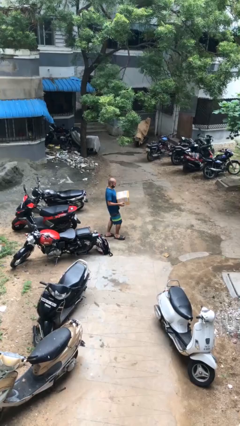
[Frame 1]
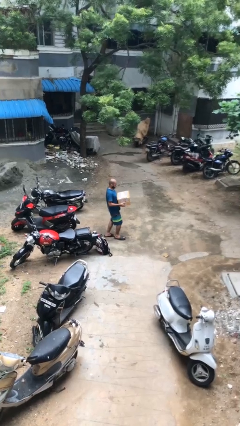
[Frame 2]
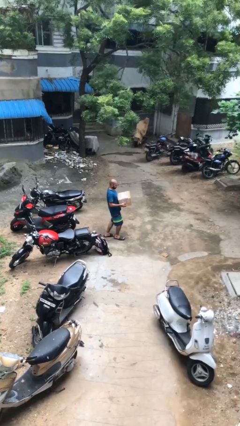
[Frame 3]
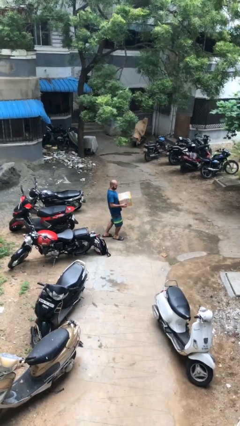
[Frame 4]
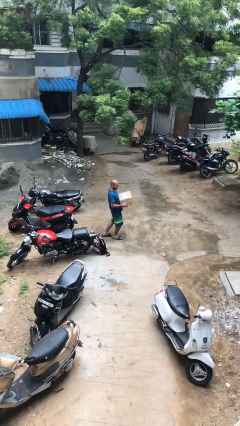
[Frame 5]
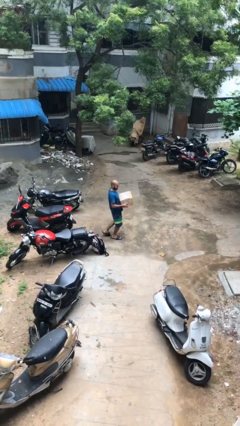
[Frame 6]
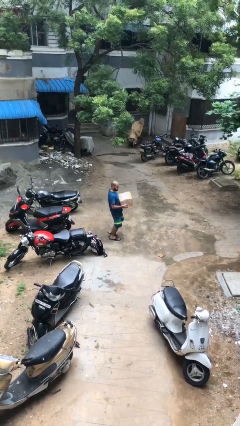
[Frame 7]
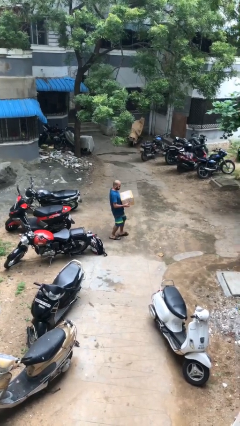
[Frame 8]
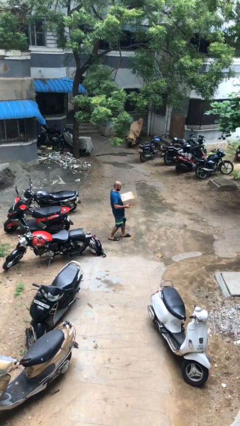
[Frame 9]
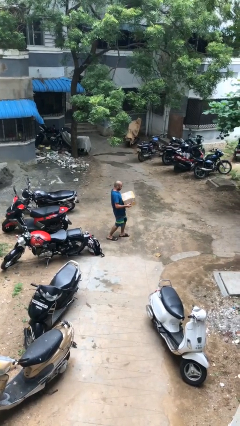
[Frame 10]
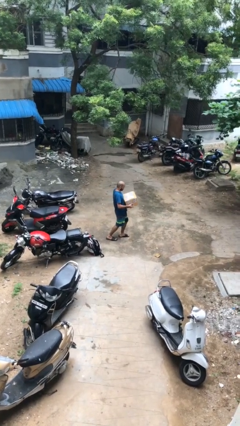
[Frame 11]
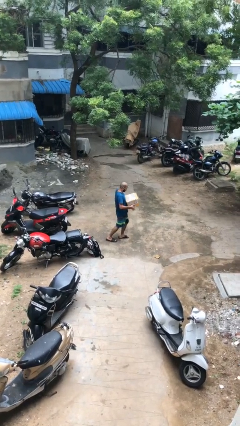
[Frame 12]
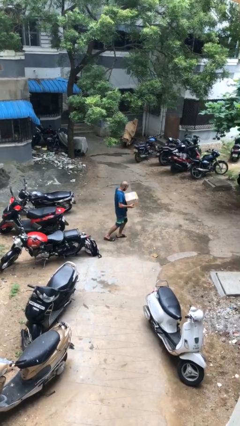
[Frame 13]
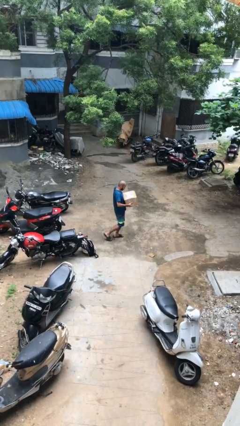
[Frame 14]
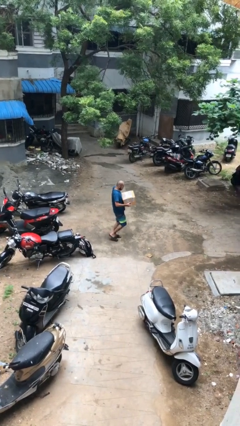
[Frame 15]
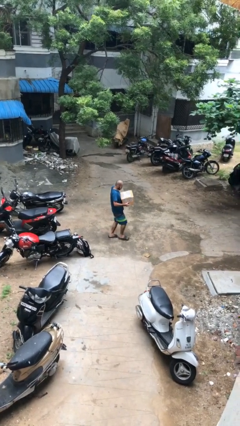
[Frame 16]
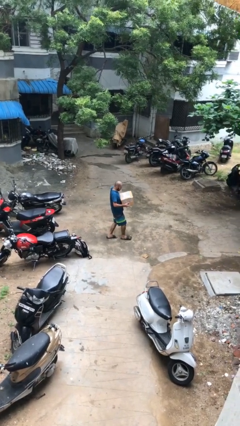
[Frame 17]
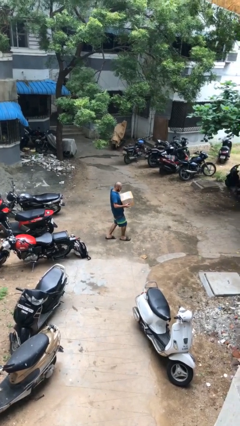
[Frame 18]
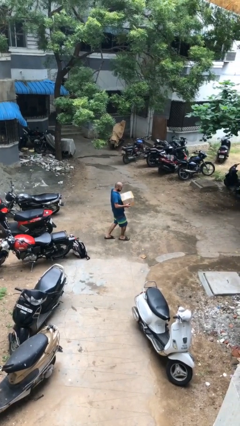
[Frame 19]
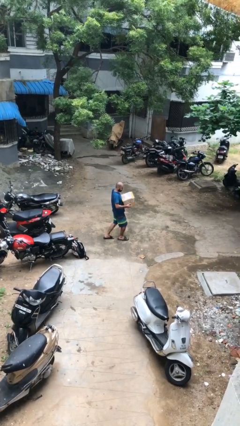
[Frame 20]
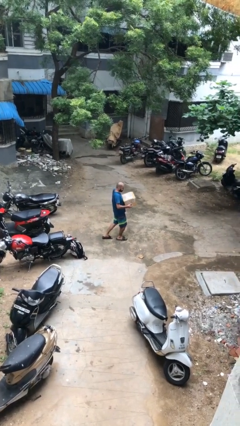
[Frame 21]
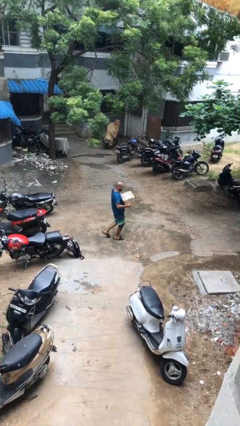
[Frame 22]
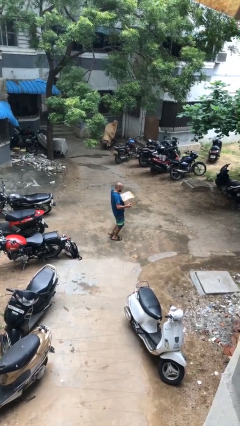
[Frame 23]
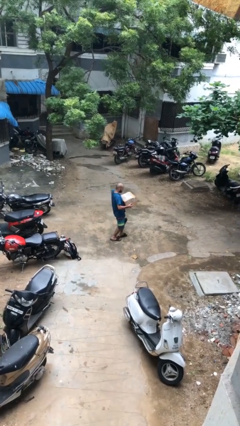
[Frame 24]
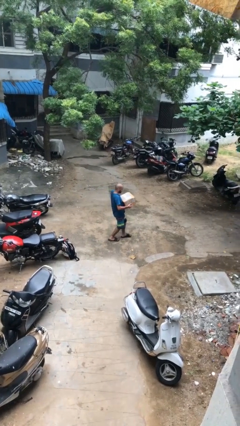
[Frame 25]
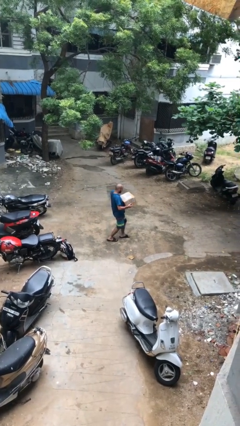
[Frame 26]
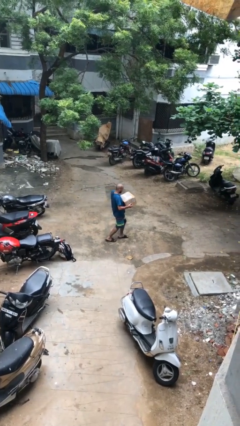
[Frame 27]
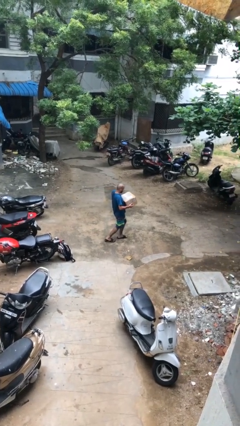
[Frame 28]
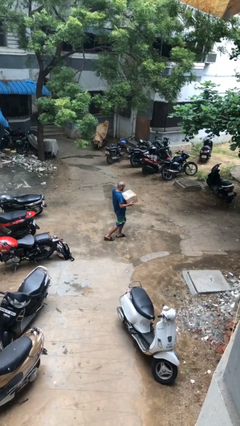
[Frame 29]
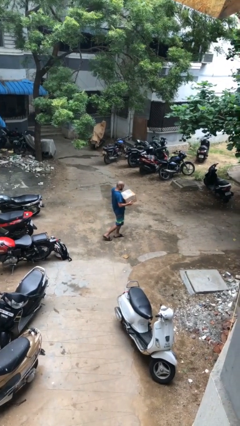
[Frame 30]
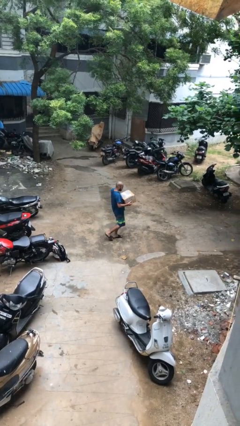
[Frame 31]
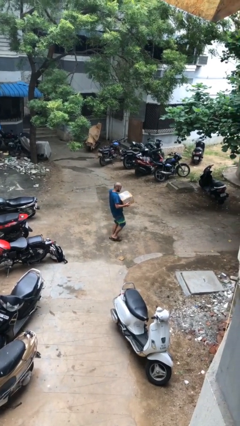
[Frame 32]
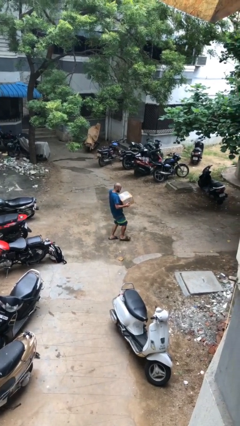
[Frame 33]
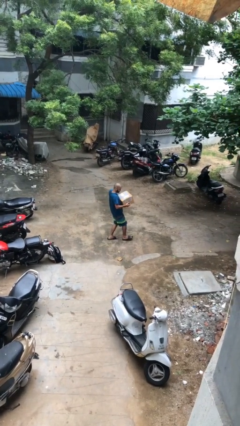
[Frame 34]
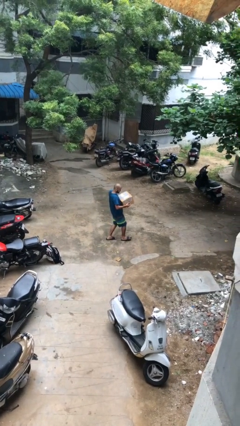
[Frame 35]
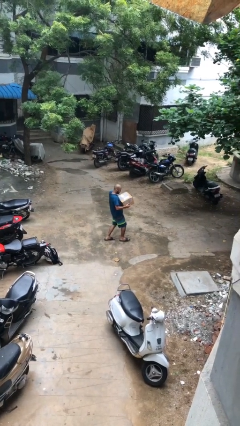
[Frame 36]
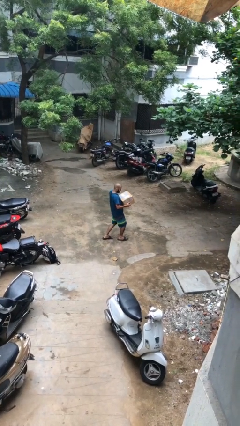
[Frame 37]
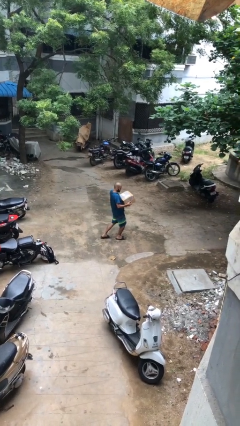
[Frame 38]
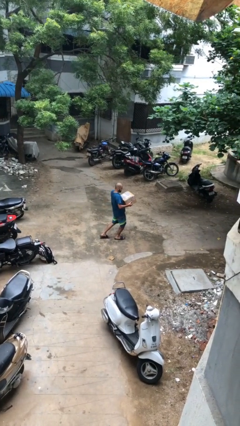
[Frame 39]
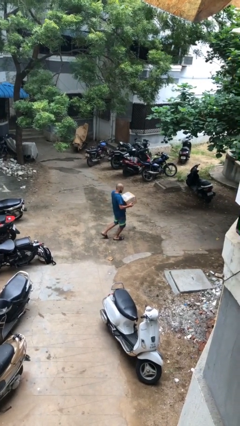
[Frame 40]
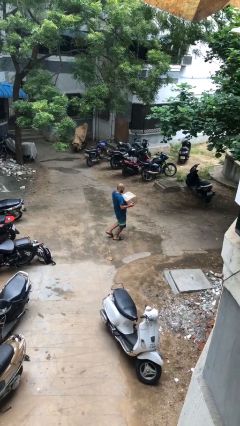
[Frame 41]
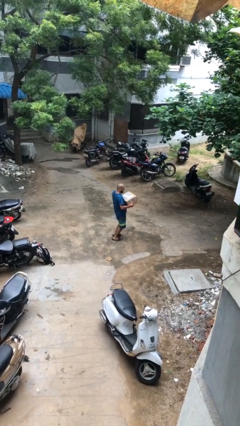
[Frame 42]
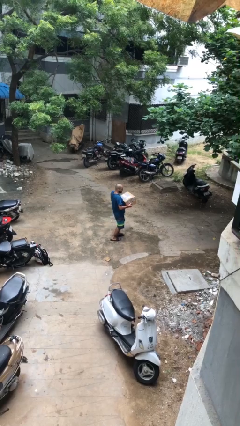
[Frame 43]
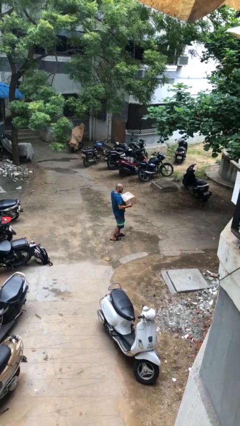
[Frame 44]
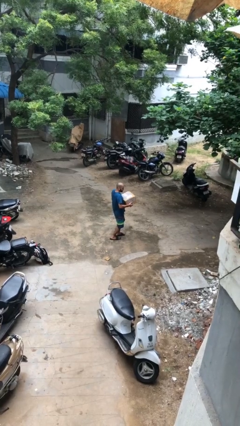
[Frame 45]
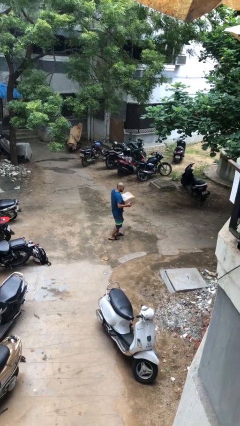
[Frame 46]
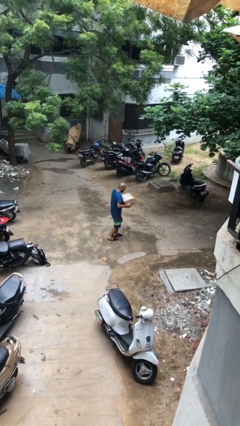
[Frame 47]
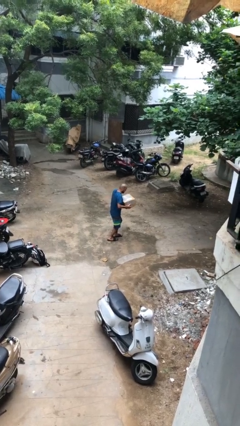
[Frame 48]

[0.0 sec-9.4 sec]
person carries heavy object

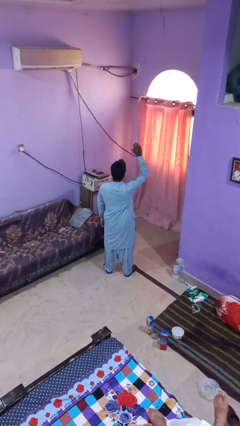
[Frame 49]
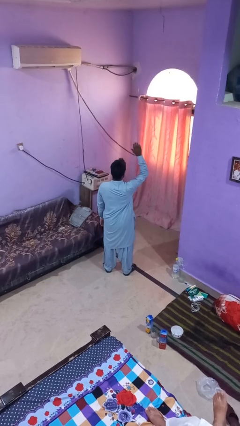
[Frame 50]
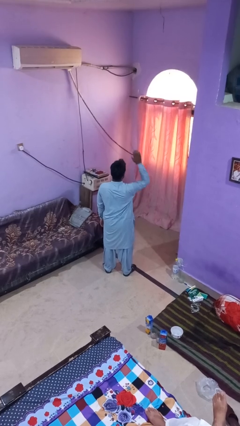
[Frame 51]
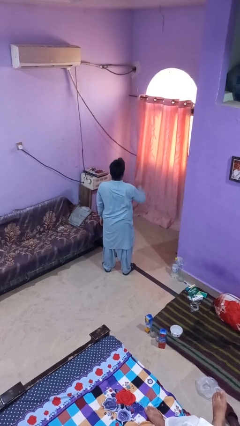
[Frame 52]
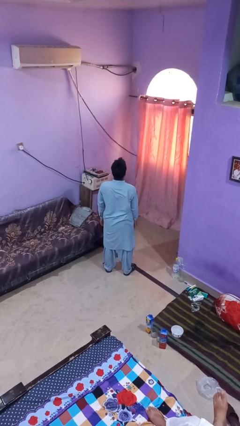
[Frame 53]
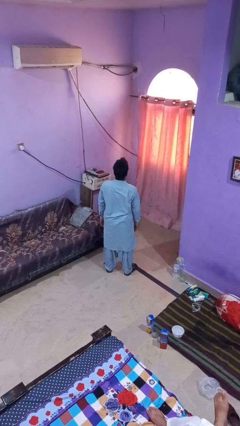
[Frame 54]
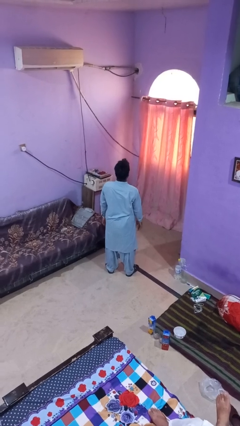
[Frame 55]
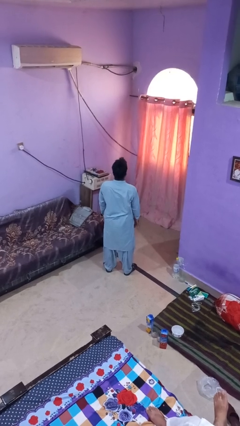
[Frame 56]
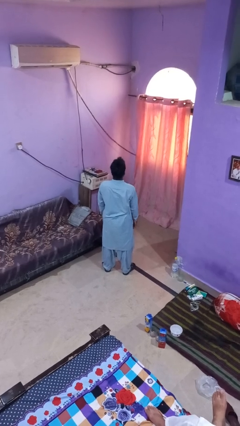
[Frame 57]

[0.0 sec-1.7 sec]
person gestures lower hand

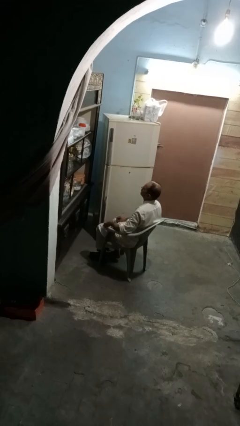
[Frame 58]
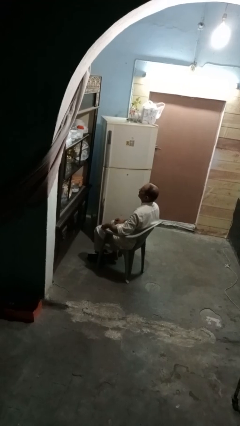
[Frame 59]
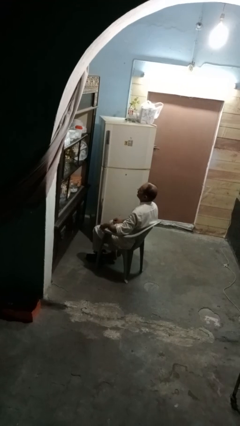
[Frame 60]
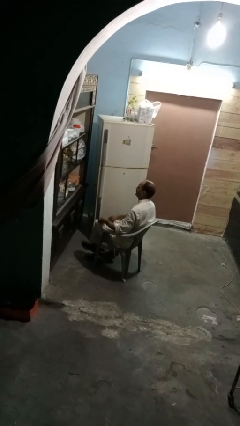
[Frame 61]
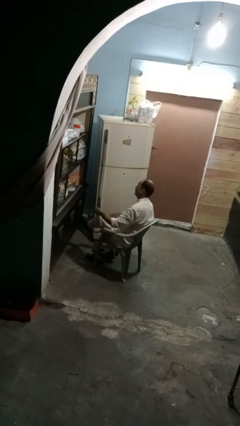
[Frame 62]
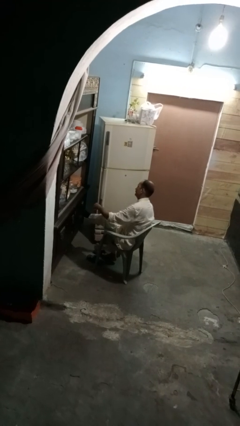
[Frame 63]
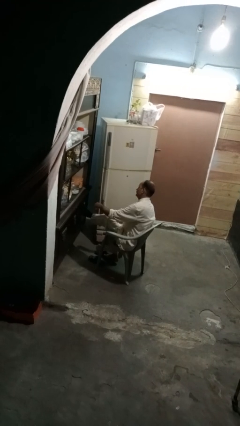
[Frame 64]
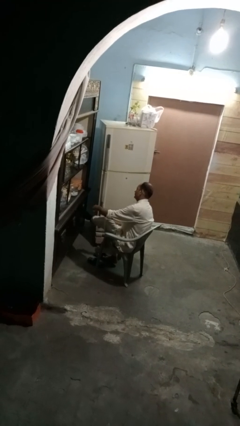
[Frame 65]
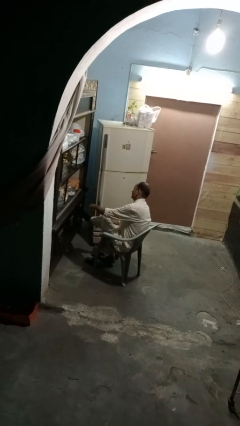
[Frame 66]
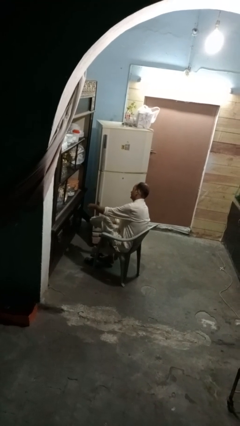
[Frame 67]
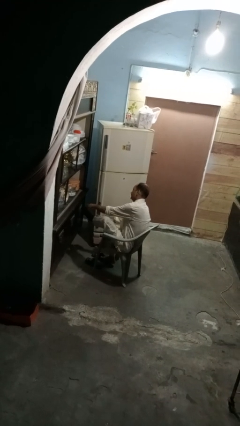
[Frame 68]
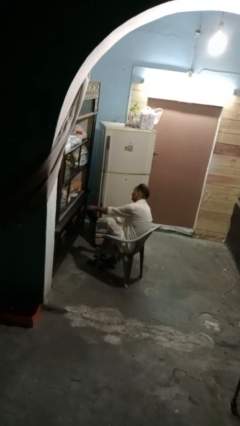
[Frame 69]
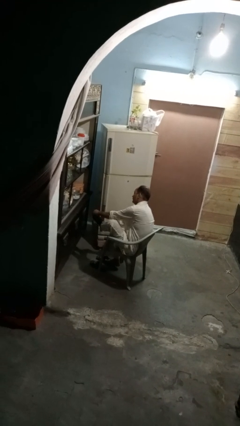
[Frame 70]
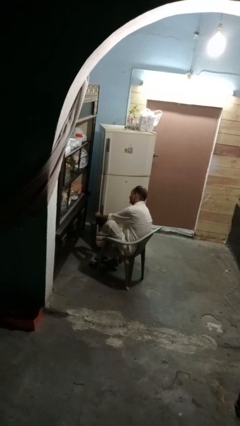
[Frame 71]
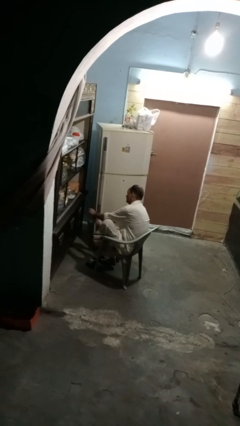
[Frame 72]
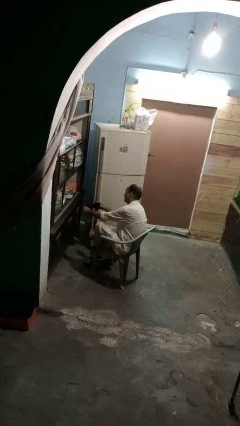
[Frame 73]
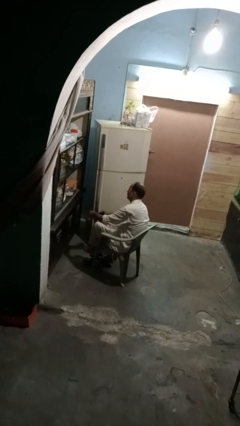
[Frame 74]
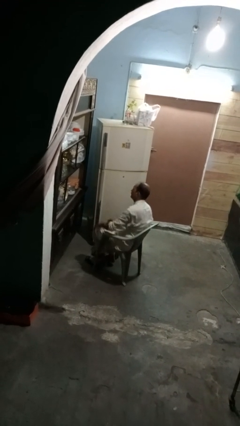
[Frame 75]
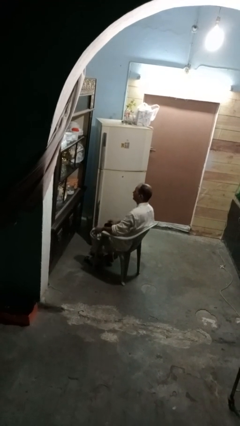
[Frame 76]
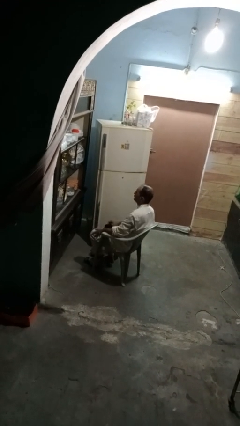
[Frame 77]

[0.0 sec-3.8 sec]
person takes off socks

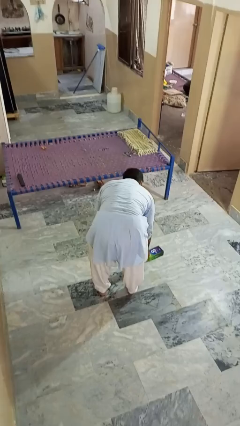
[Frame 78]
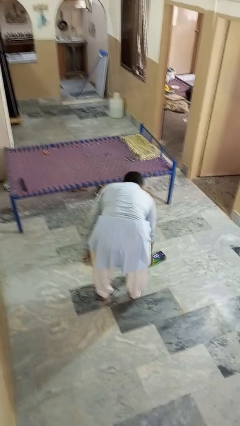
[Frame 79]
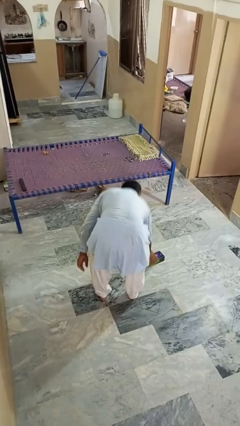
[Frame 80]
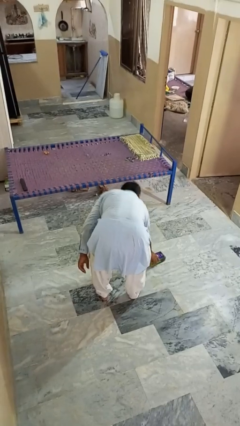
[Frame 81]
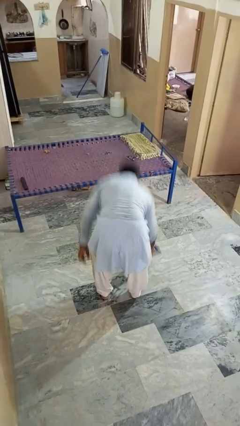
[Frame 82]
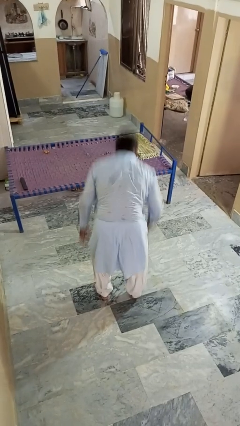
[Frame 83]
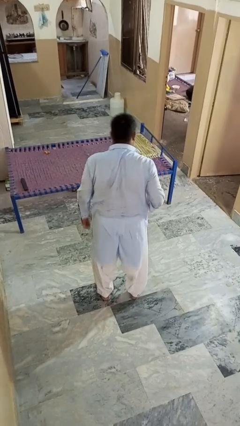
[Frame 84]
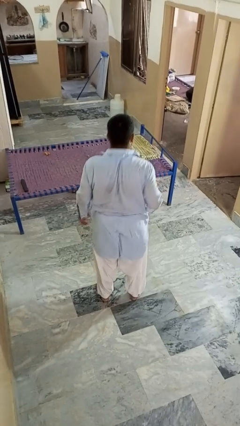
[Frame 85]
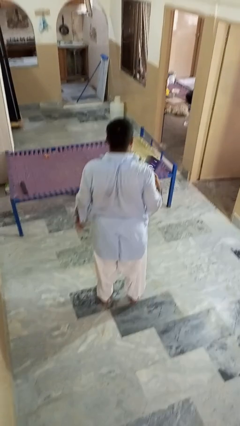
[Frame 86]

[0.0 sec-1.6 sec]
person picks up object from floor

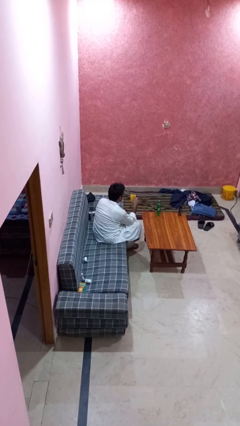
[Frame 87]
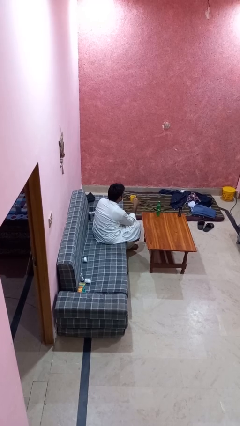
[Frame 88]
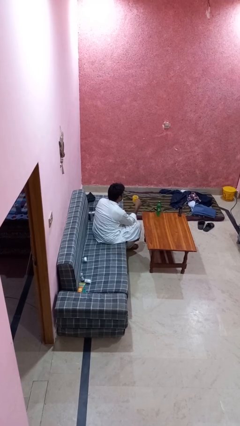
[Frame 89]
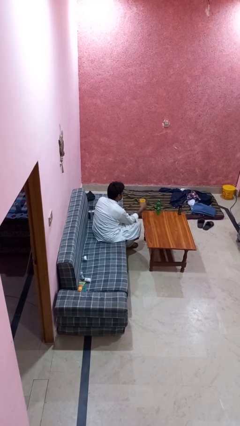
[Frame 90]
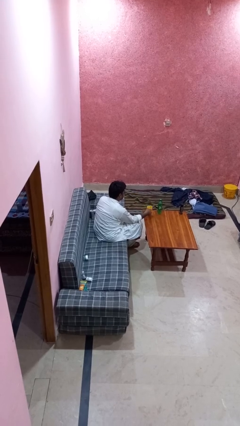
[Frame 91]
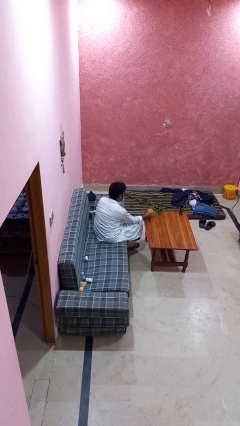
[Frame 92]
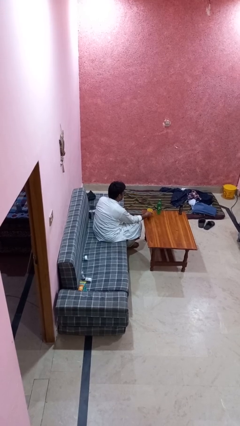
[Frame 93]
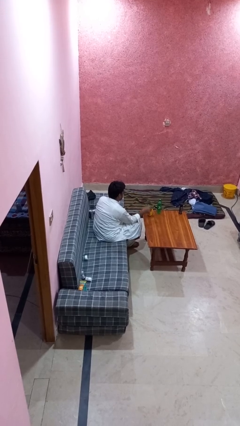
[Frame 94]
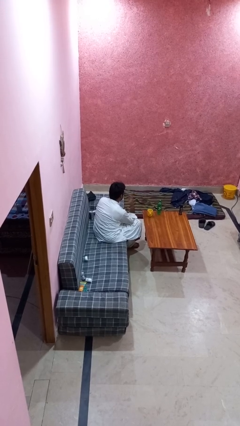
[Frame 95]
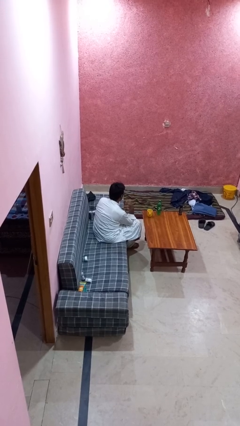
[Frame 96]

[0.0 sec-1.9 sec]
person puts down object on table
